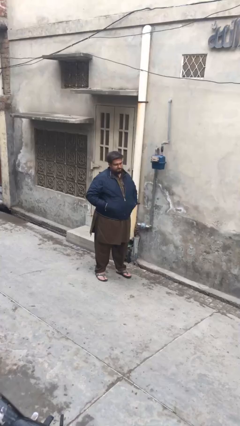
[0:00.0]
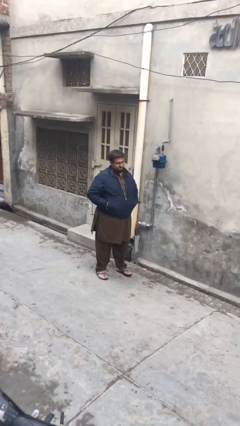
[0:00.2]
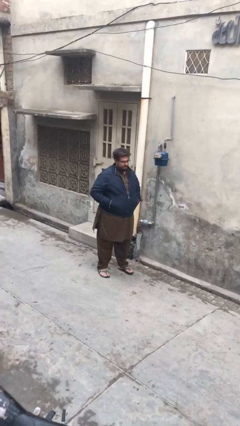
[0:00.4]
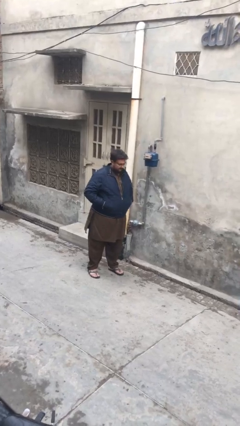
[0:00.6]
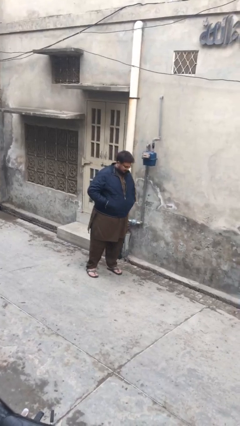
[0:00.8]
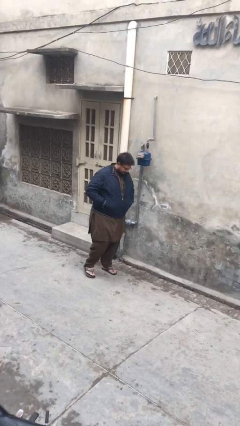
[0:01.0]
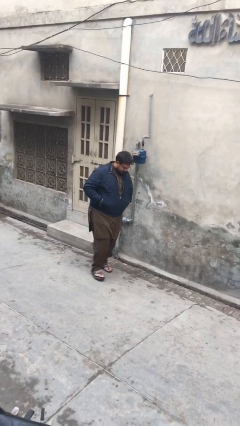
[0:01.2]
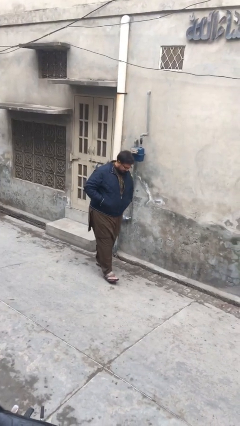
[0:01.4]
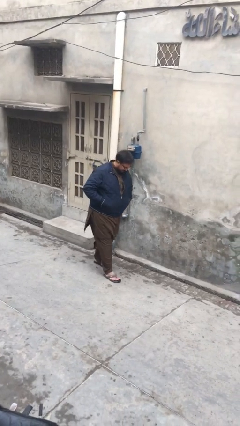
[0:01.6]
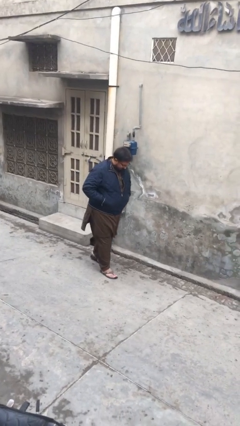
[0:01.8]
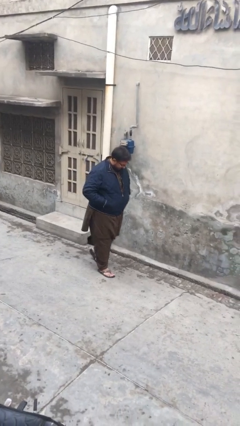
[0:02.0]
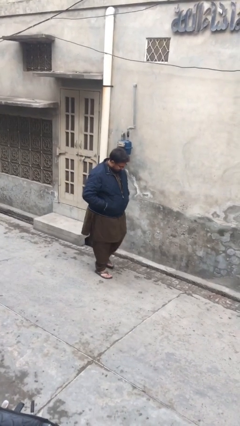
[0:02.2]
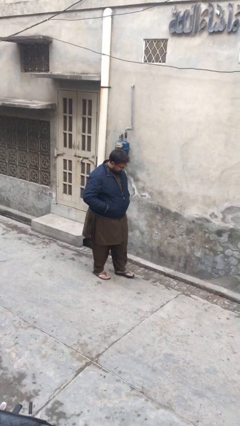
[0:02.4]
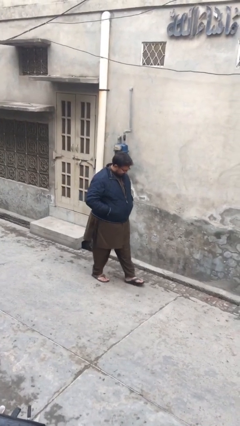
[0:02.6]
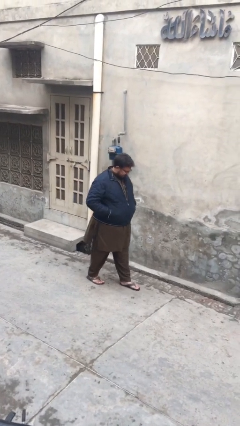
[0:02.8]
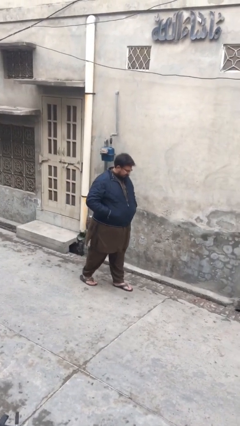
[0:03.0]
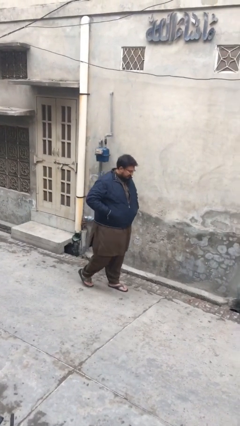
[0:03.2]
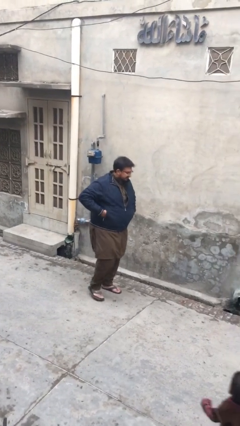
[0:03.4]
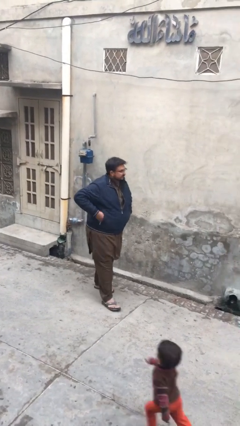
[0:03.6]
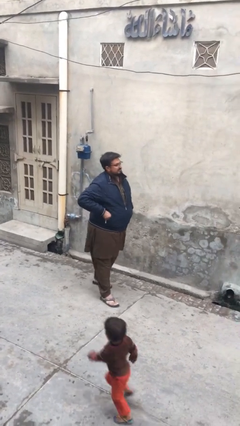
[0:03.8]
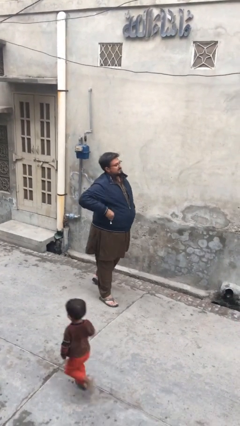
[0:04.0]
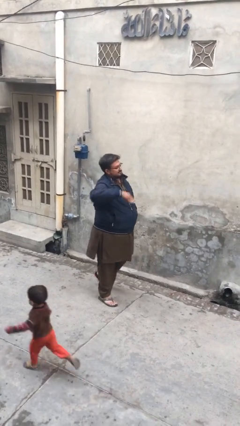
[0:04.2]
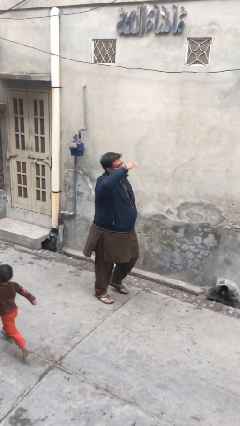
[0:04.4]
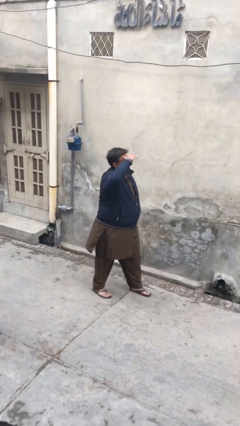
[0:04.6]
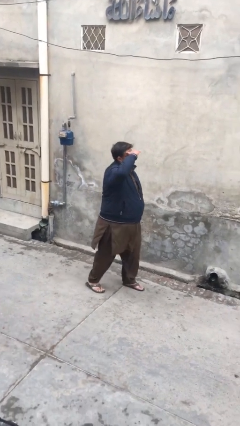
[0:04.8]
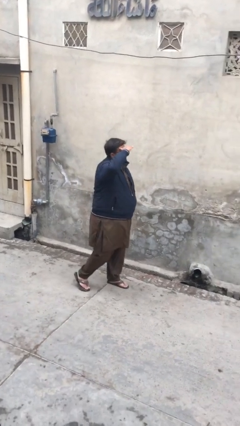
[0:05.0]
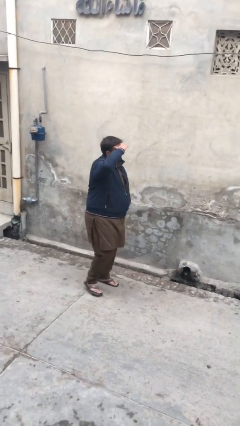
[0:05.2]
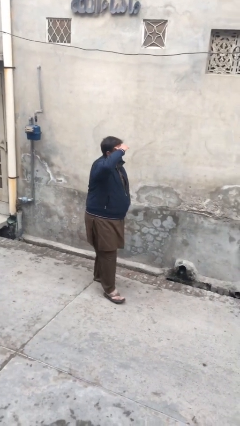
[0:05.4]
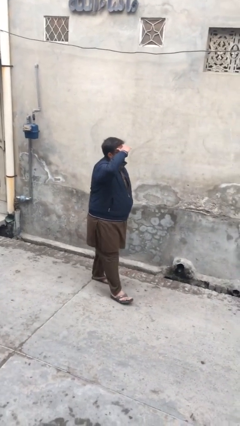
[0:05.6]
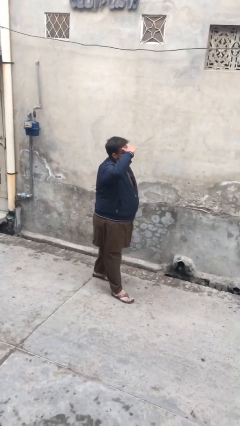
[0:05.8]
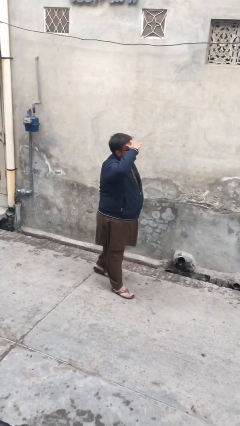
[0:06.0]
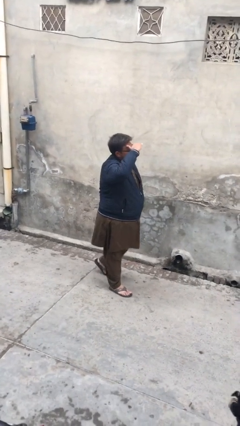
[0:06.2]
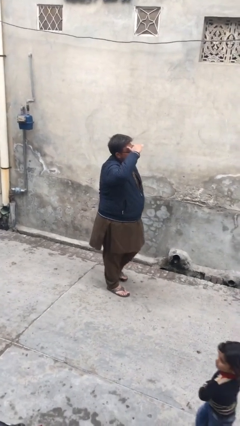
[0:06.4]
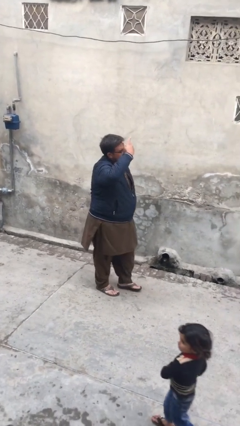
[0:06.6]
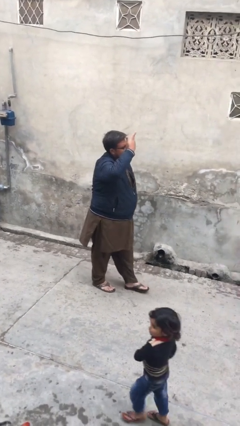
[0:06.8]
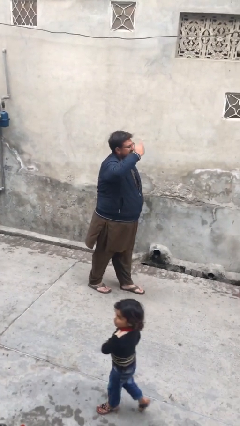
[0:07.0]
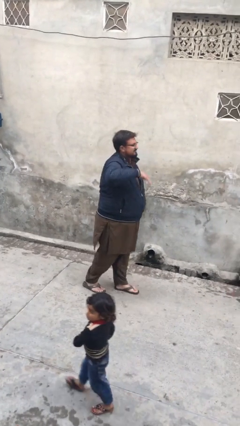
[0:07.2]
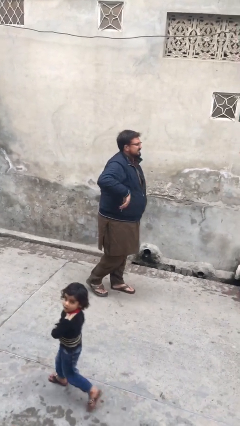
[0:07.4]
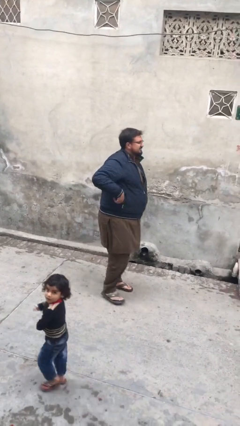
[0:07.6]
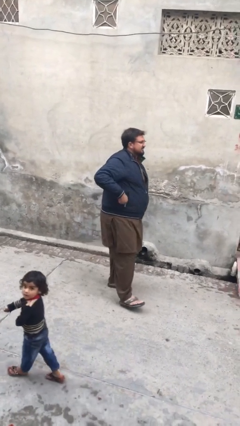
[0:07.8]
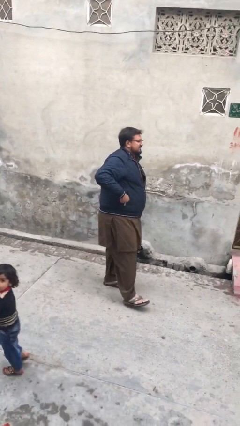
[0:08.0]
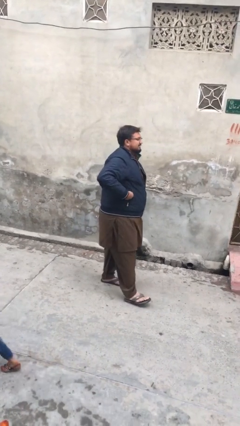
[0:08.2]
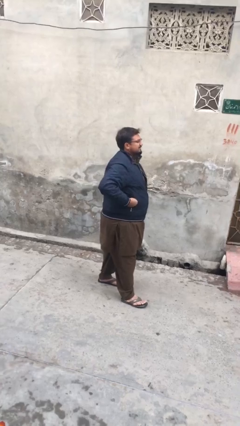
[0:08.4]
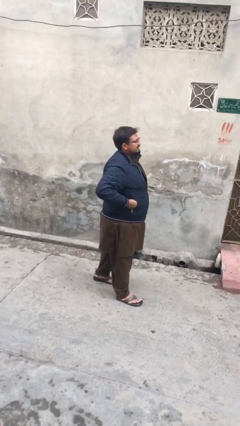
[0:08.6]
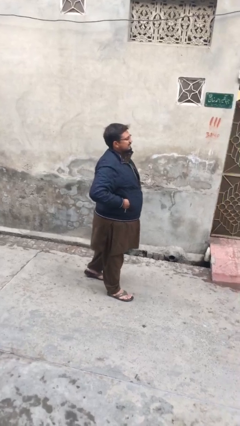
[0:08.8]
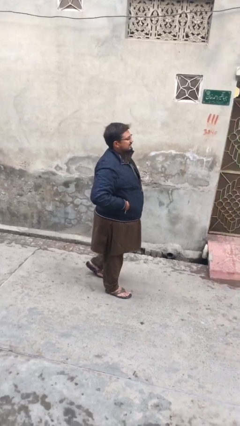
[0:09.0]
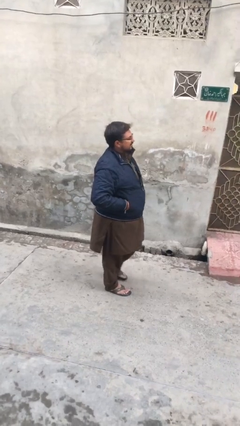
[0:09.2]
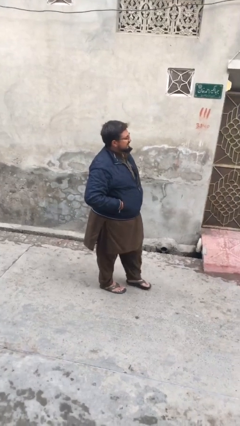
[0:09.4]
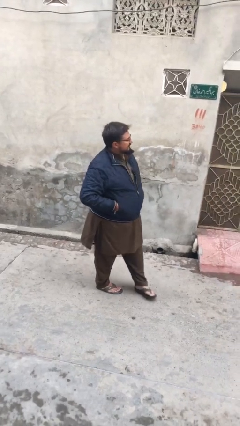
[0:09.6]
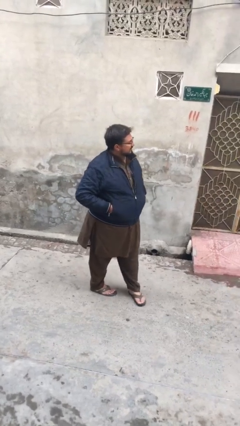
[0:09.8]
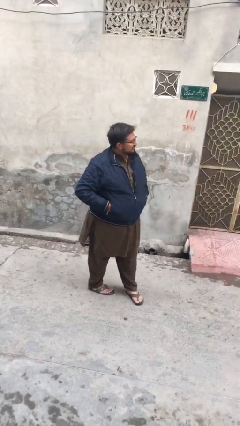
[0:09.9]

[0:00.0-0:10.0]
person walks

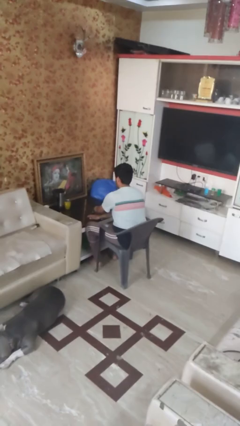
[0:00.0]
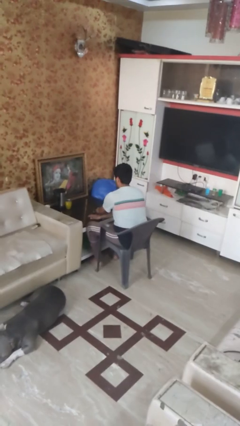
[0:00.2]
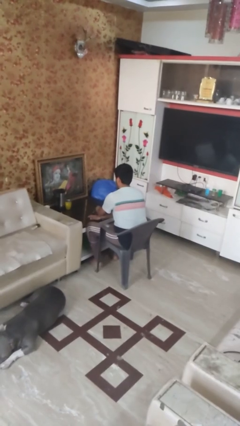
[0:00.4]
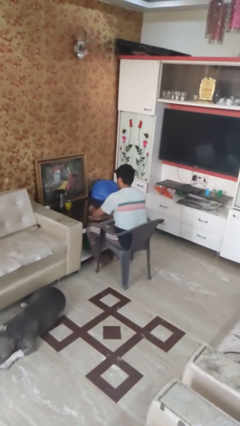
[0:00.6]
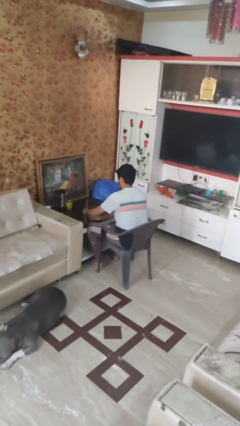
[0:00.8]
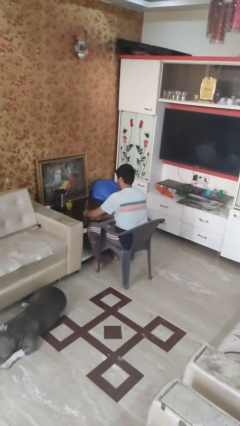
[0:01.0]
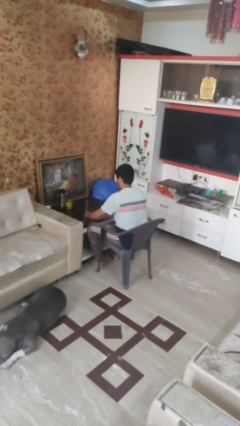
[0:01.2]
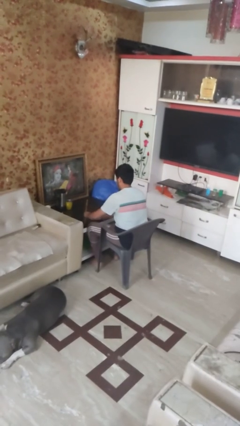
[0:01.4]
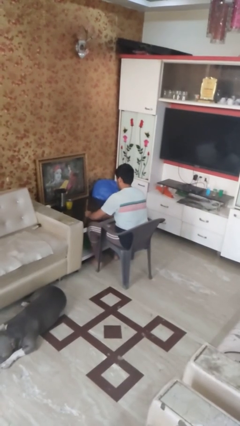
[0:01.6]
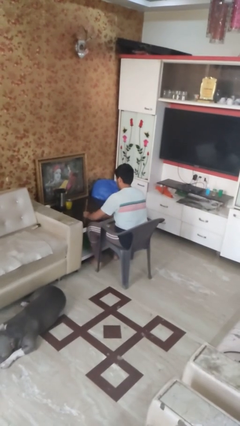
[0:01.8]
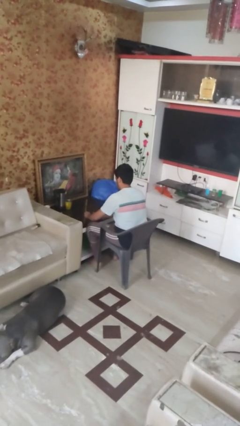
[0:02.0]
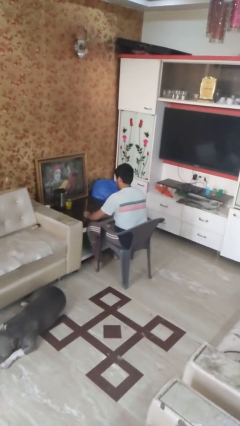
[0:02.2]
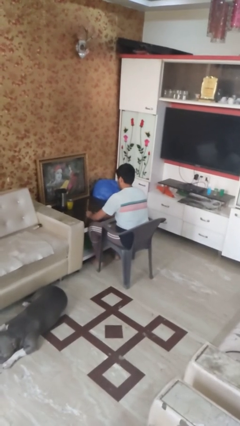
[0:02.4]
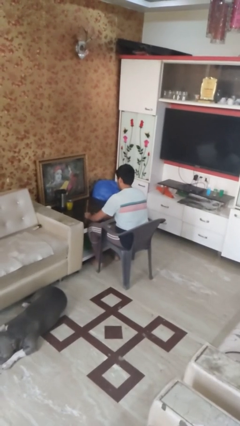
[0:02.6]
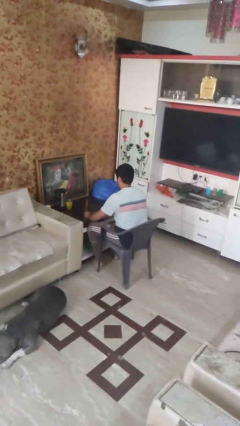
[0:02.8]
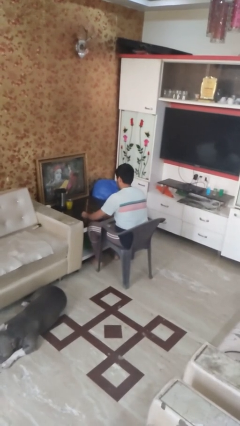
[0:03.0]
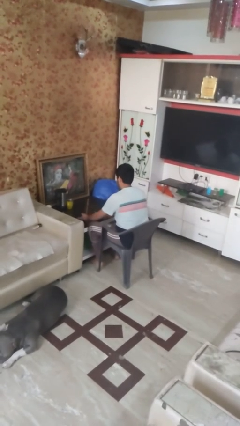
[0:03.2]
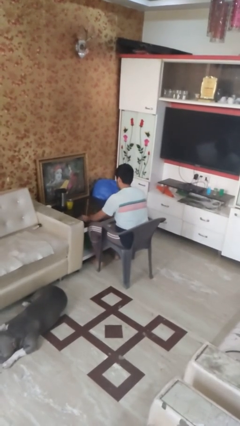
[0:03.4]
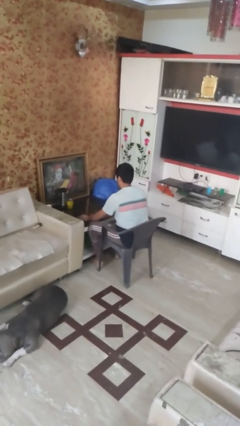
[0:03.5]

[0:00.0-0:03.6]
person paints fingernails

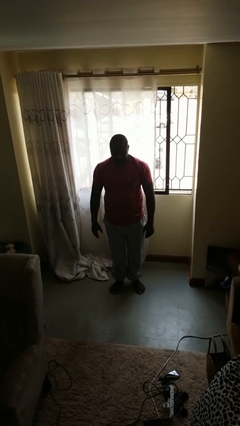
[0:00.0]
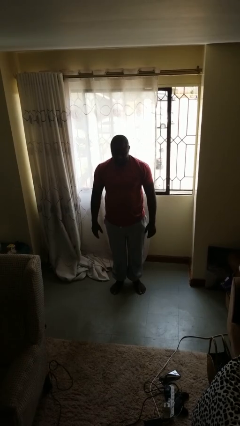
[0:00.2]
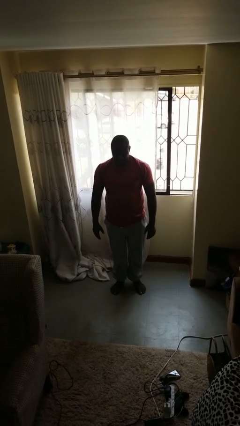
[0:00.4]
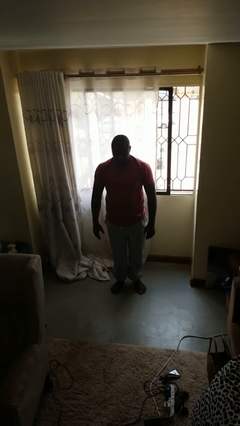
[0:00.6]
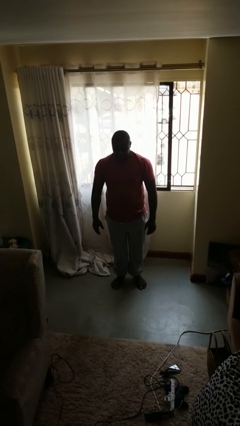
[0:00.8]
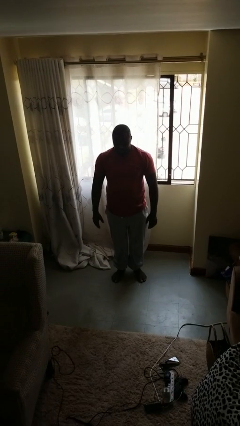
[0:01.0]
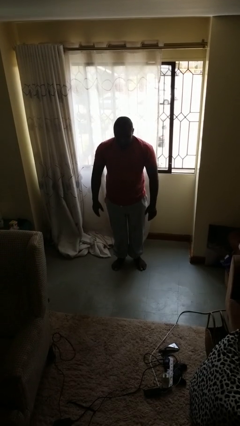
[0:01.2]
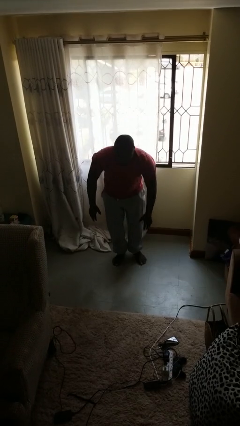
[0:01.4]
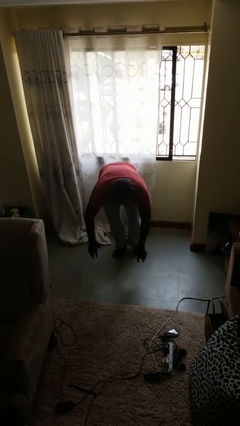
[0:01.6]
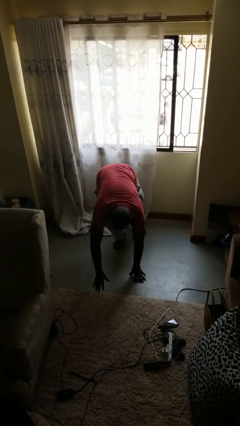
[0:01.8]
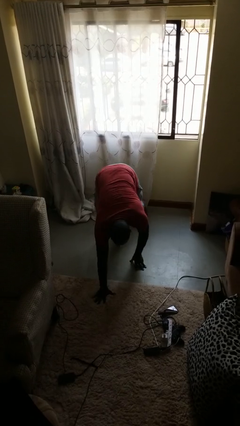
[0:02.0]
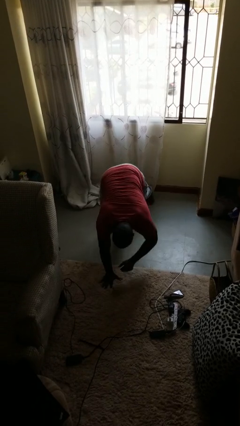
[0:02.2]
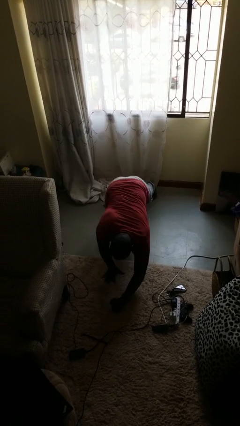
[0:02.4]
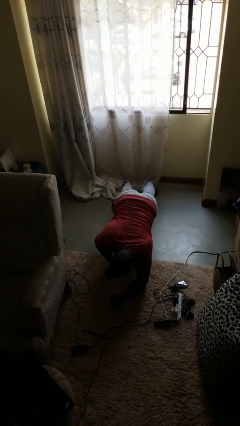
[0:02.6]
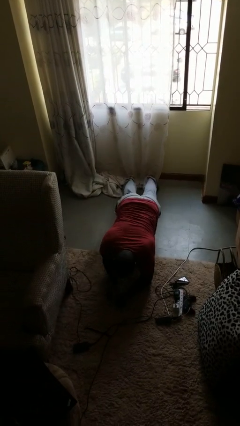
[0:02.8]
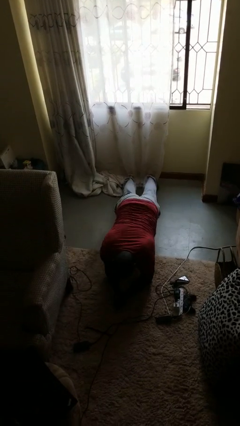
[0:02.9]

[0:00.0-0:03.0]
person exercises with plank

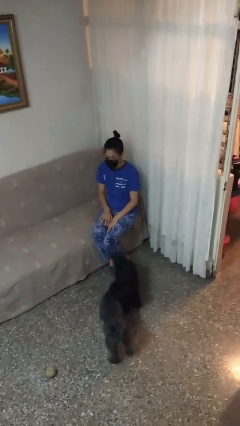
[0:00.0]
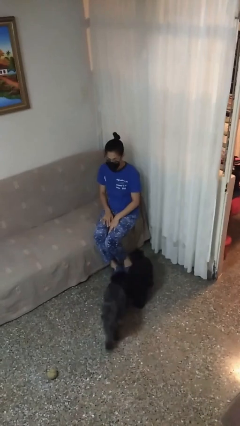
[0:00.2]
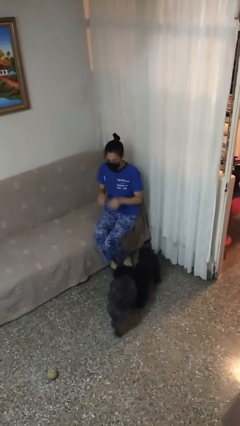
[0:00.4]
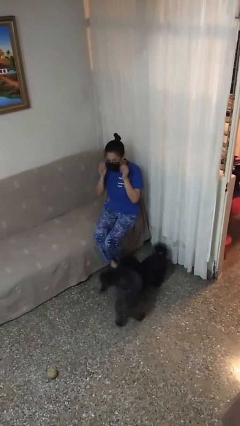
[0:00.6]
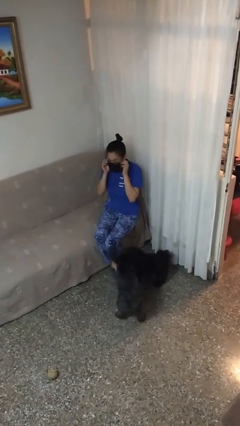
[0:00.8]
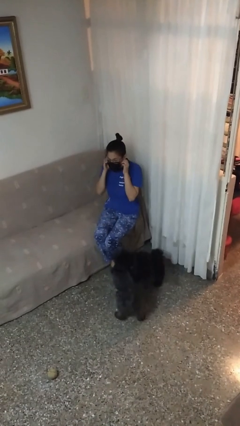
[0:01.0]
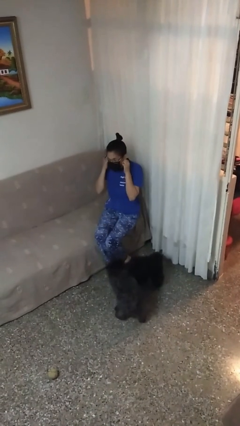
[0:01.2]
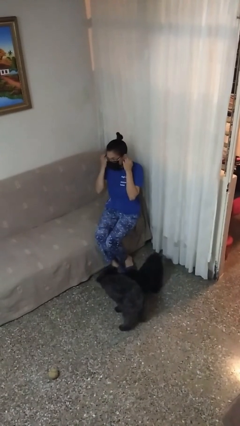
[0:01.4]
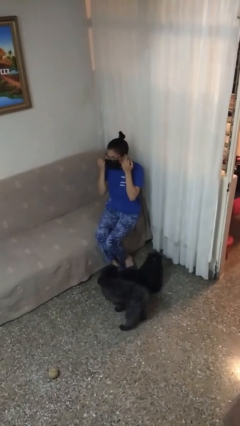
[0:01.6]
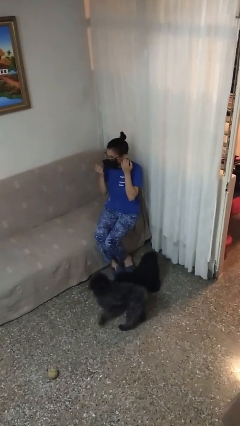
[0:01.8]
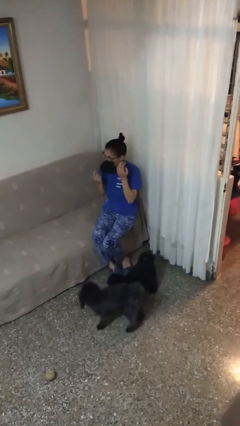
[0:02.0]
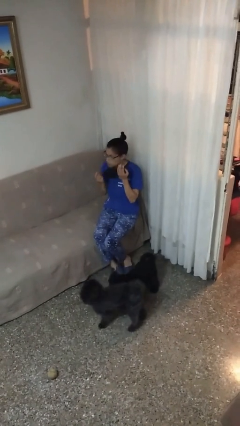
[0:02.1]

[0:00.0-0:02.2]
person takes off facemask
